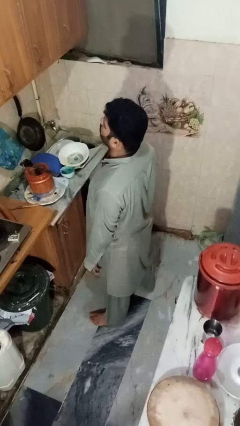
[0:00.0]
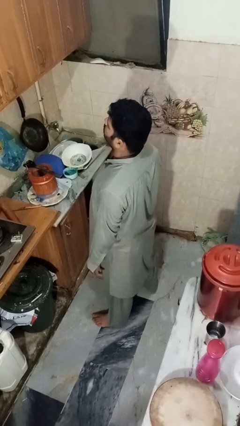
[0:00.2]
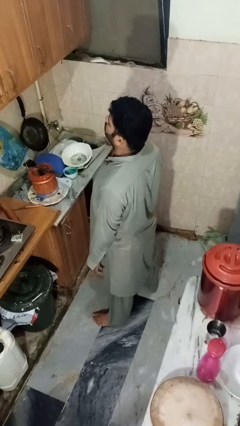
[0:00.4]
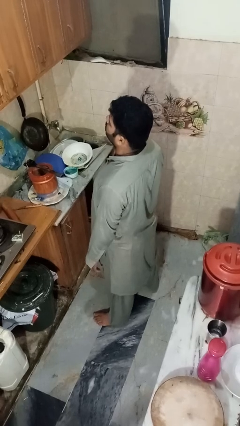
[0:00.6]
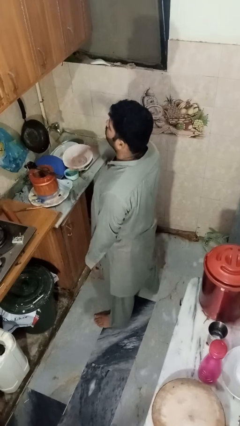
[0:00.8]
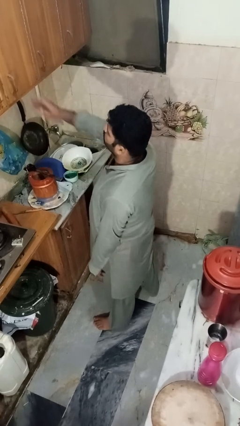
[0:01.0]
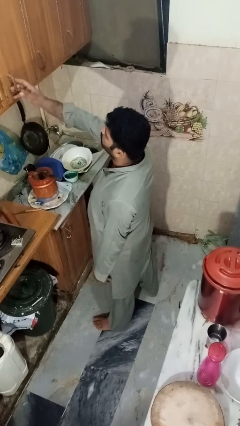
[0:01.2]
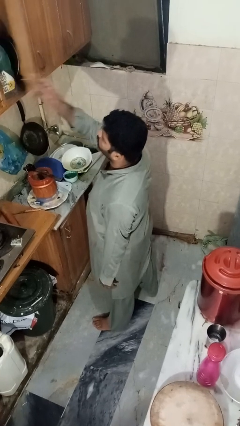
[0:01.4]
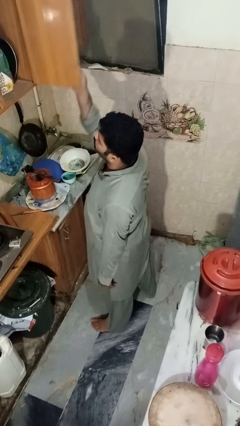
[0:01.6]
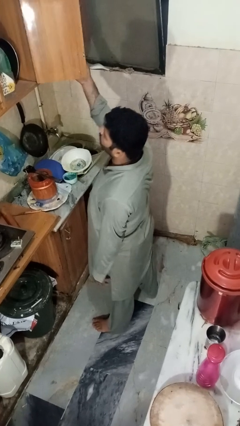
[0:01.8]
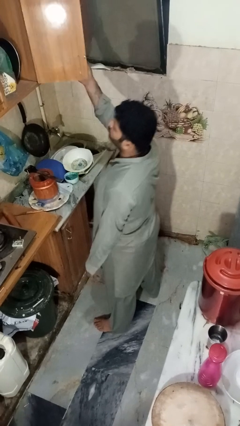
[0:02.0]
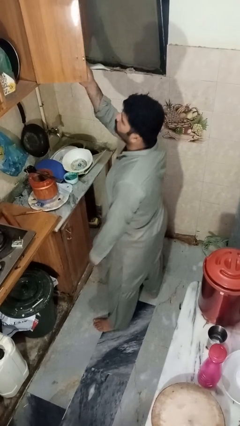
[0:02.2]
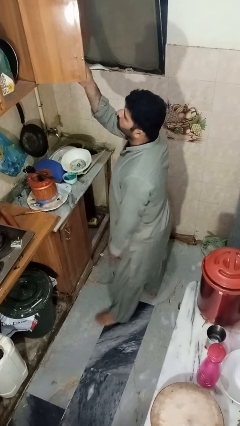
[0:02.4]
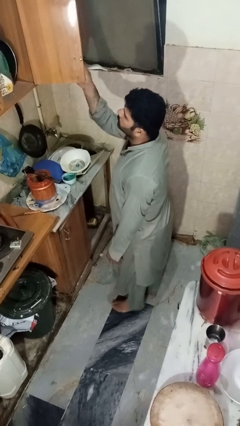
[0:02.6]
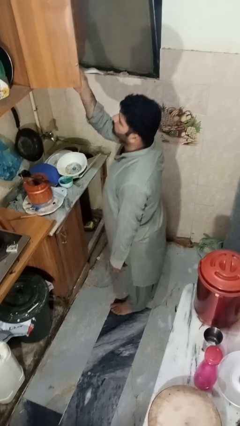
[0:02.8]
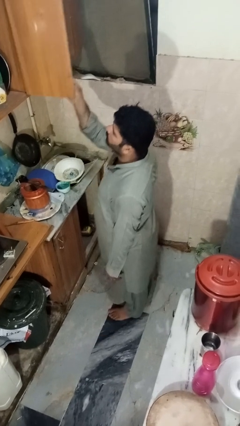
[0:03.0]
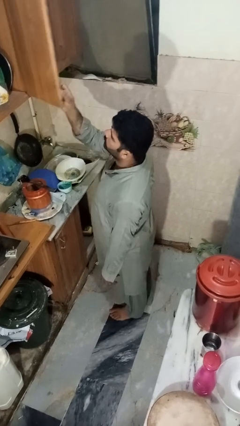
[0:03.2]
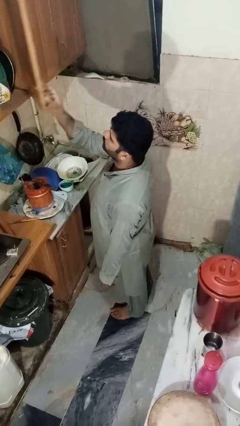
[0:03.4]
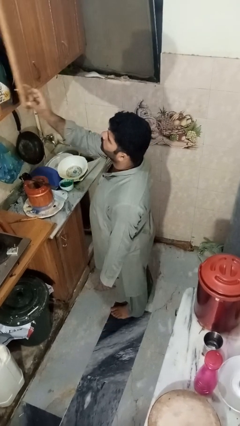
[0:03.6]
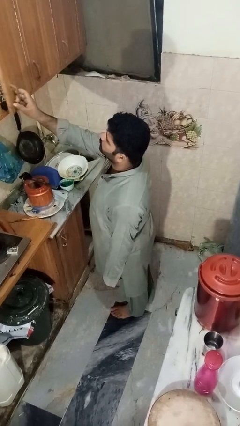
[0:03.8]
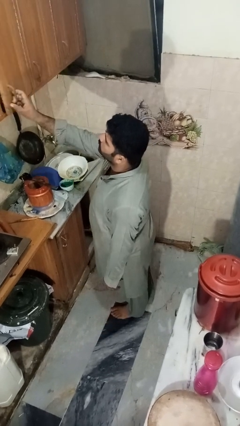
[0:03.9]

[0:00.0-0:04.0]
person opens cabinet

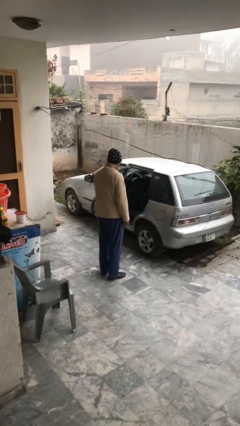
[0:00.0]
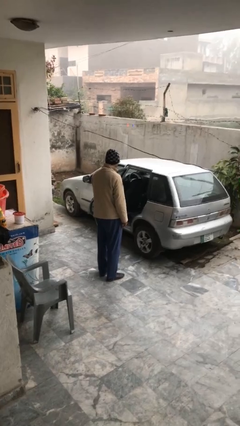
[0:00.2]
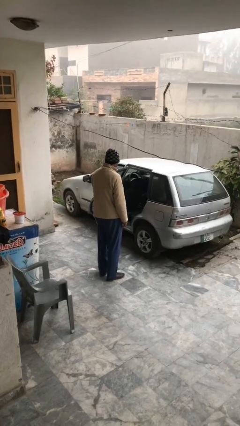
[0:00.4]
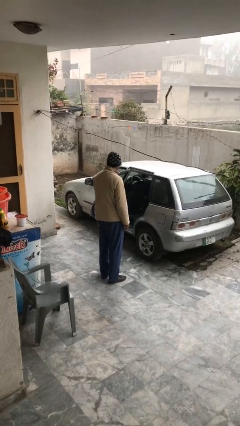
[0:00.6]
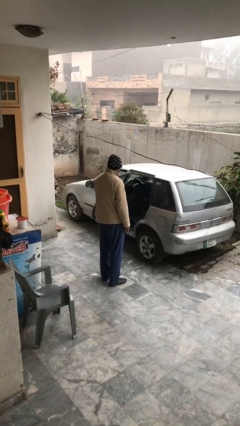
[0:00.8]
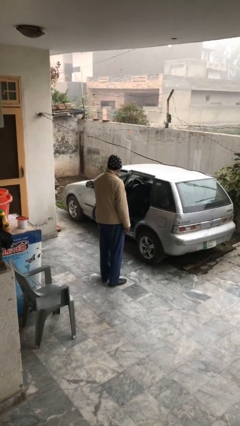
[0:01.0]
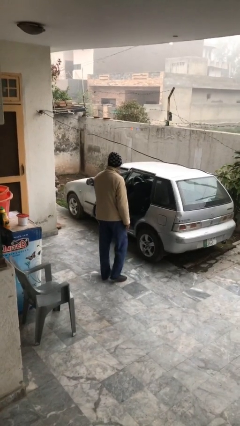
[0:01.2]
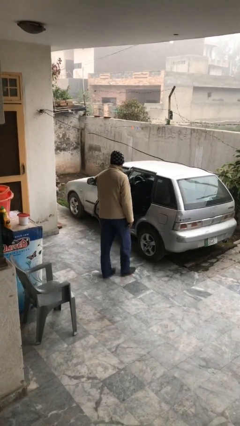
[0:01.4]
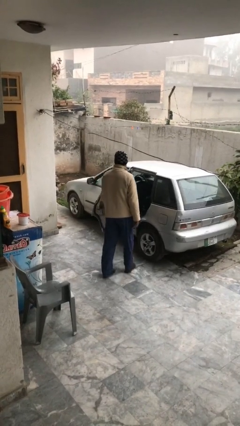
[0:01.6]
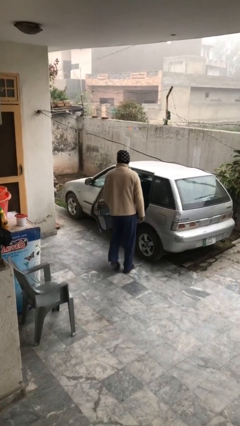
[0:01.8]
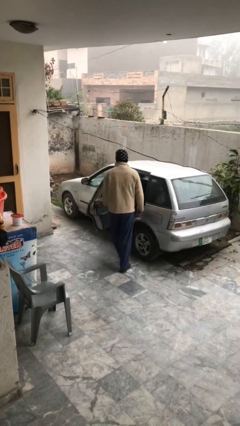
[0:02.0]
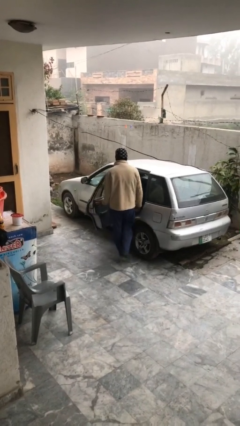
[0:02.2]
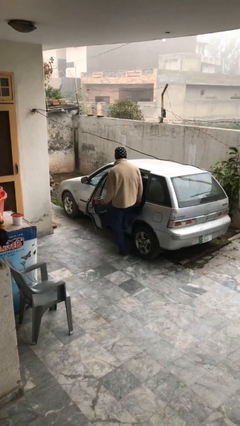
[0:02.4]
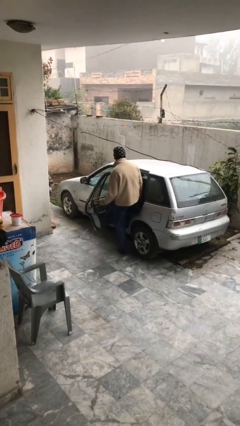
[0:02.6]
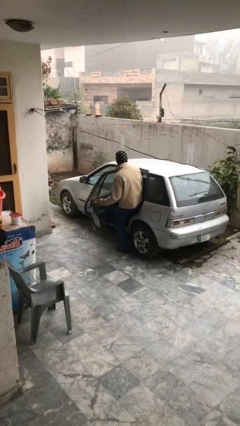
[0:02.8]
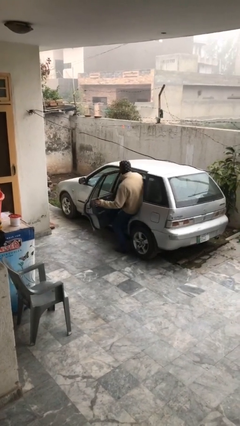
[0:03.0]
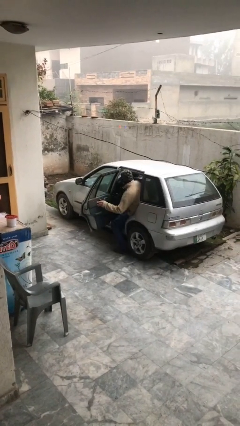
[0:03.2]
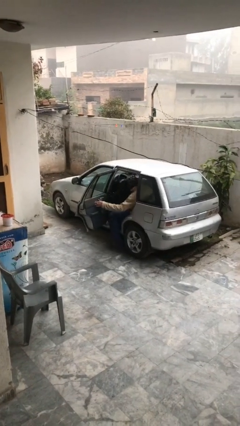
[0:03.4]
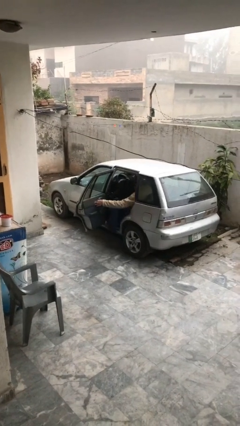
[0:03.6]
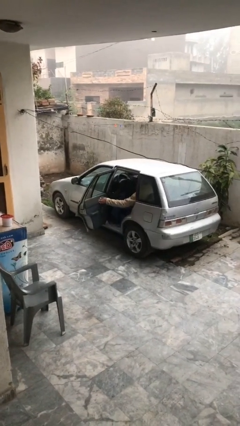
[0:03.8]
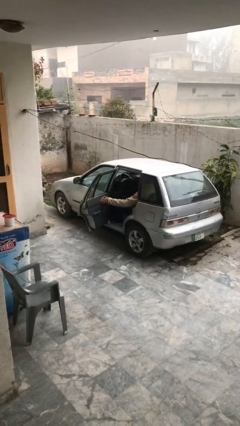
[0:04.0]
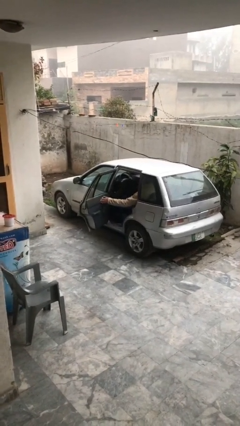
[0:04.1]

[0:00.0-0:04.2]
person enters car

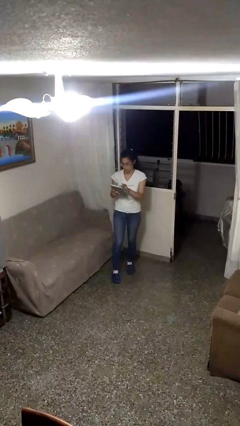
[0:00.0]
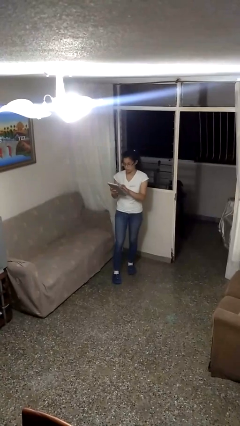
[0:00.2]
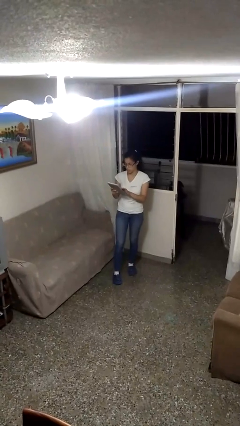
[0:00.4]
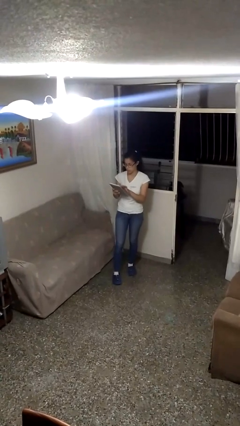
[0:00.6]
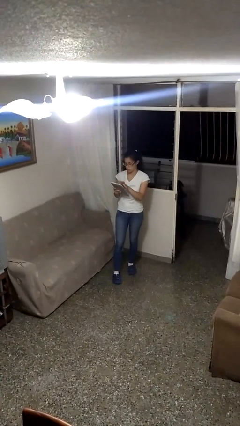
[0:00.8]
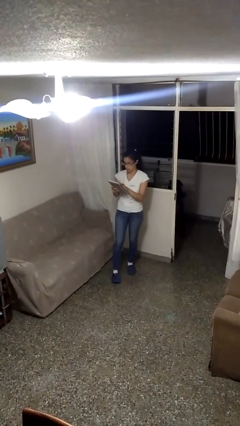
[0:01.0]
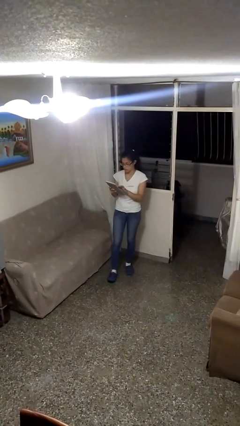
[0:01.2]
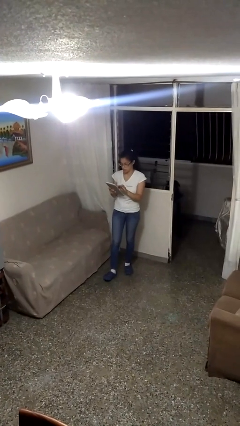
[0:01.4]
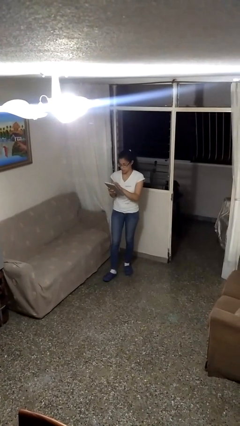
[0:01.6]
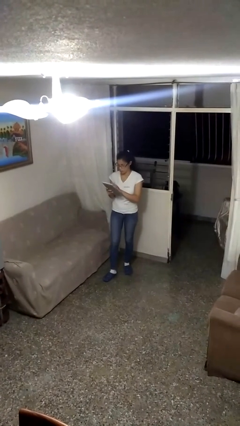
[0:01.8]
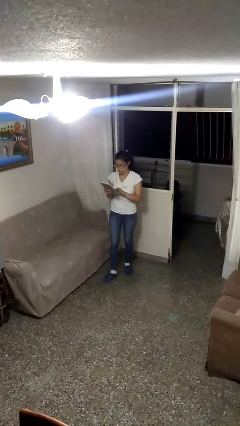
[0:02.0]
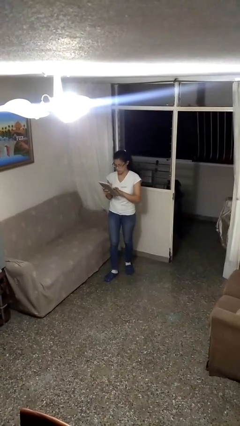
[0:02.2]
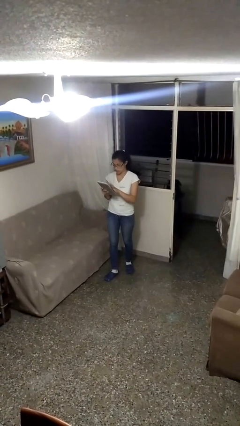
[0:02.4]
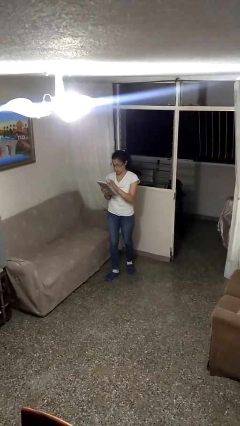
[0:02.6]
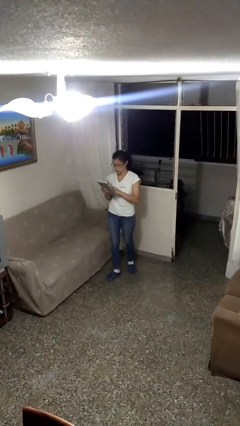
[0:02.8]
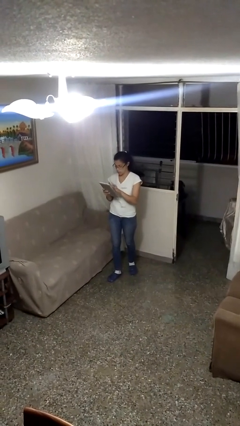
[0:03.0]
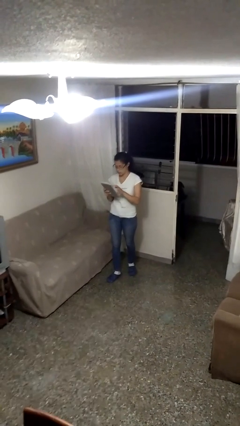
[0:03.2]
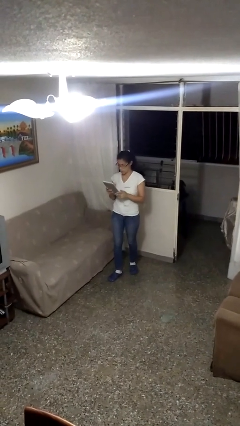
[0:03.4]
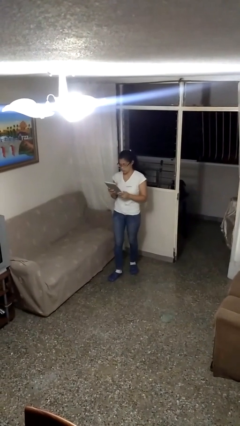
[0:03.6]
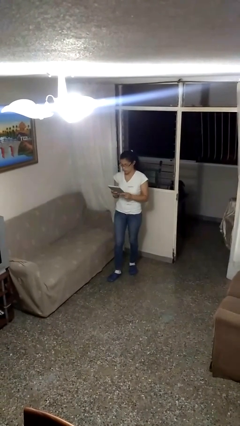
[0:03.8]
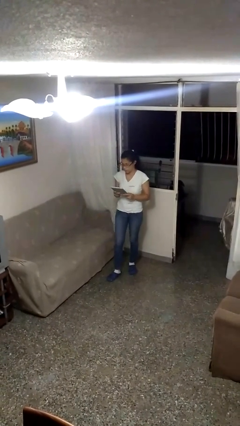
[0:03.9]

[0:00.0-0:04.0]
person interacts with tablet

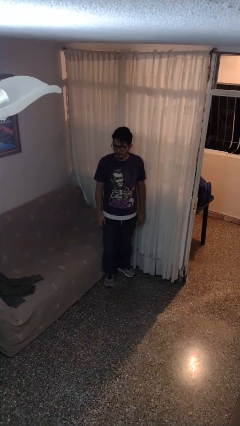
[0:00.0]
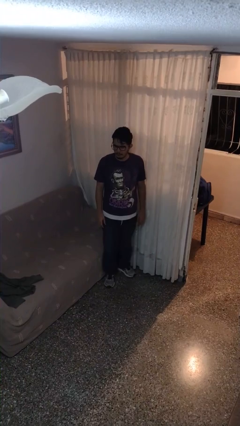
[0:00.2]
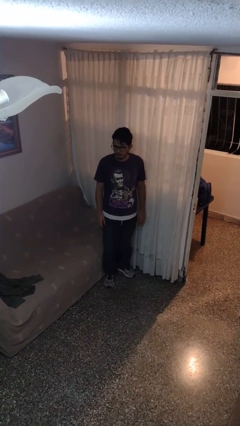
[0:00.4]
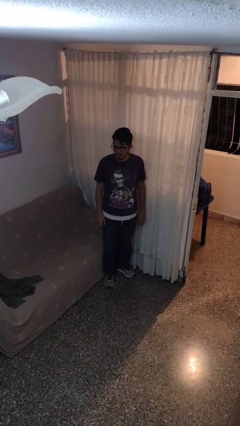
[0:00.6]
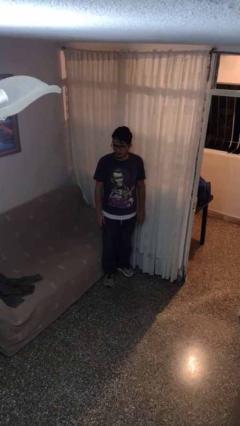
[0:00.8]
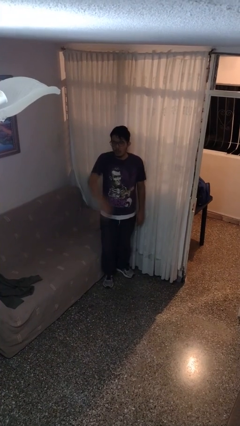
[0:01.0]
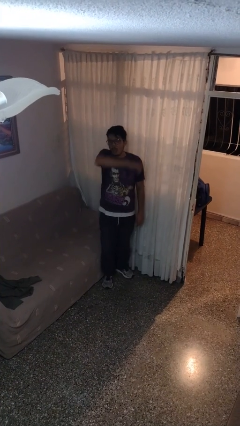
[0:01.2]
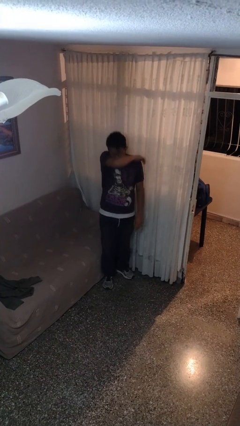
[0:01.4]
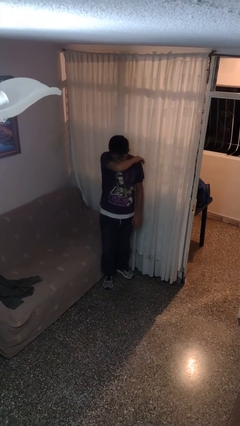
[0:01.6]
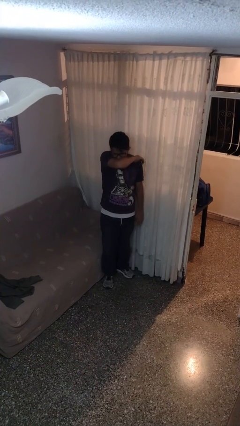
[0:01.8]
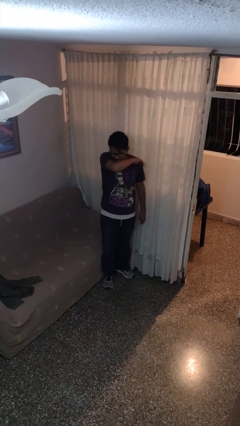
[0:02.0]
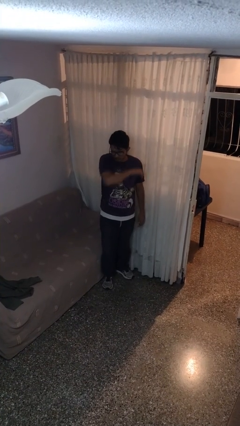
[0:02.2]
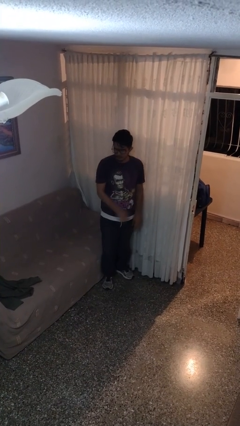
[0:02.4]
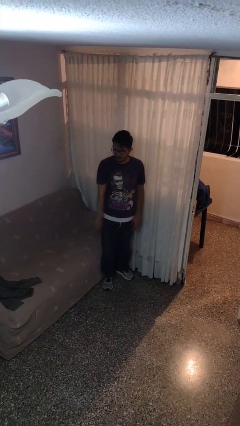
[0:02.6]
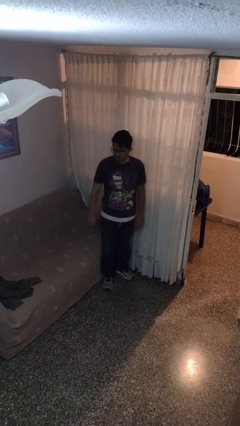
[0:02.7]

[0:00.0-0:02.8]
person sneezes into arm

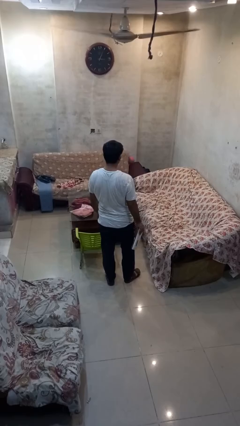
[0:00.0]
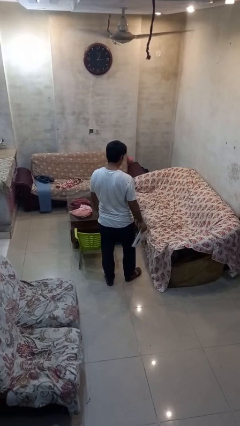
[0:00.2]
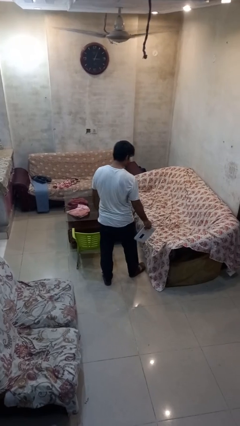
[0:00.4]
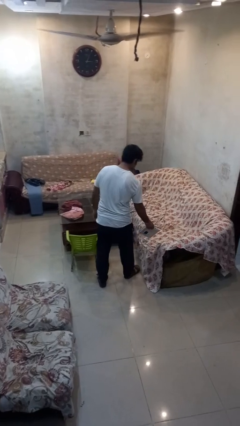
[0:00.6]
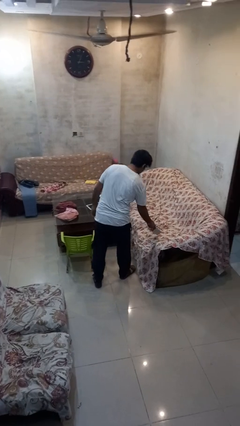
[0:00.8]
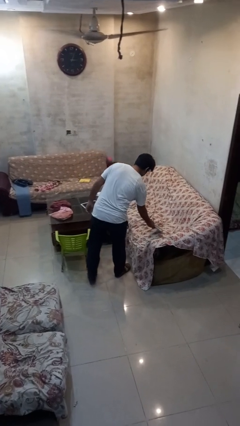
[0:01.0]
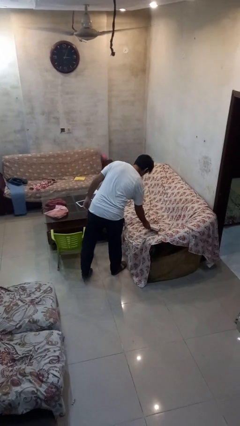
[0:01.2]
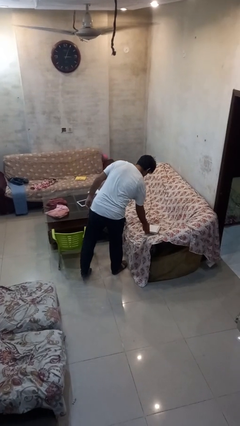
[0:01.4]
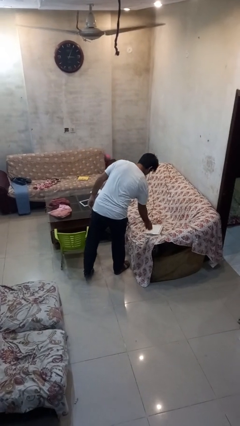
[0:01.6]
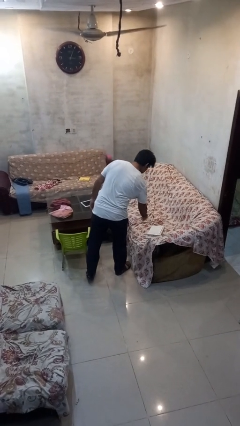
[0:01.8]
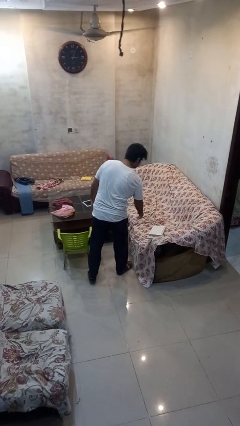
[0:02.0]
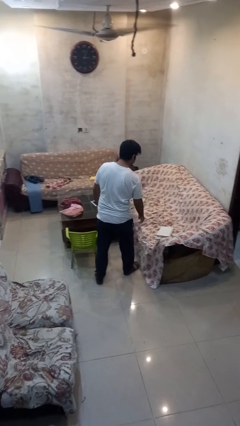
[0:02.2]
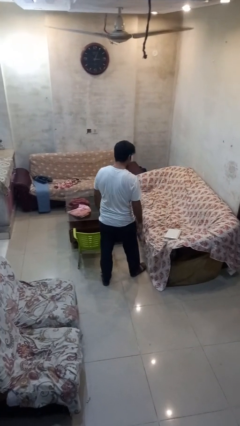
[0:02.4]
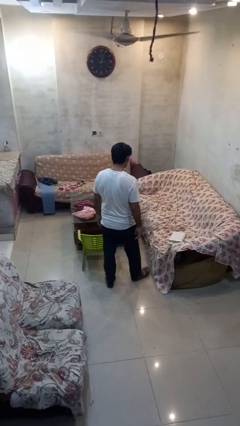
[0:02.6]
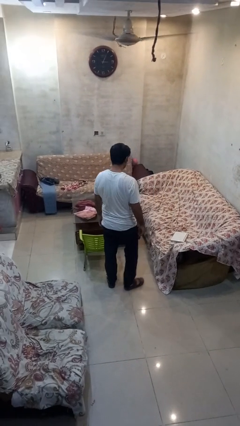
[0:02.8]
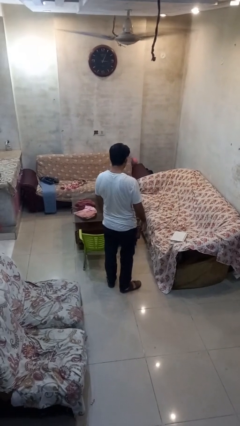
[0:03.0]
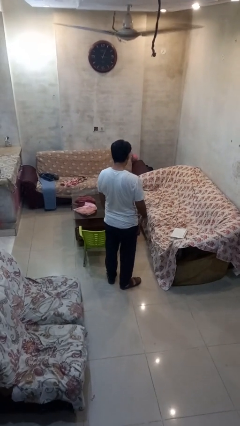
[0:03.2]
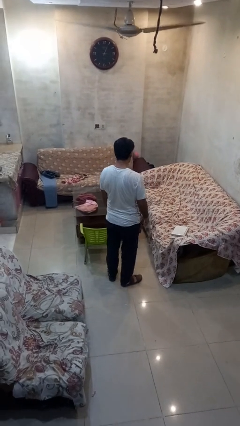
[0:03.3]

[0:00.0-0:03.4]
person puts down object on couch
